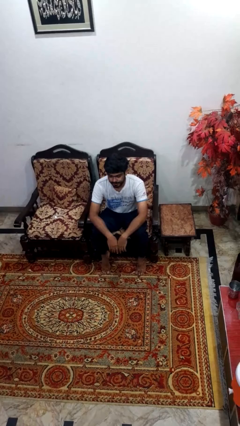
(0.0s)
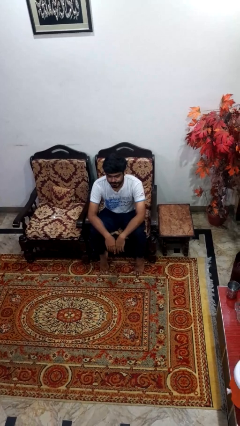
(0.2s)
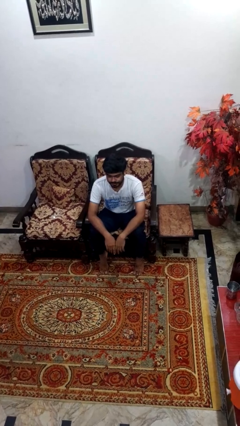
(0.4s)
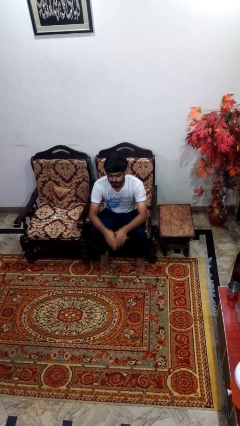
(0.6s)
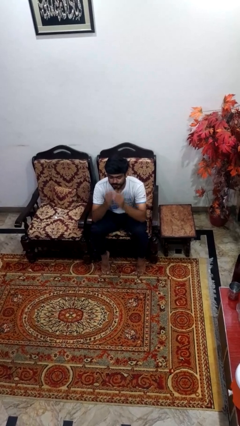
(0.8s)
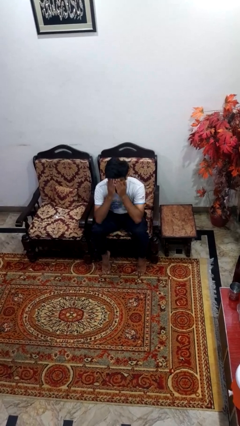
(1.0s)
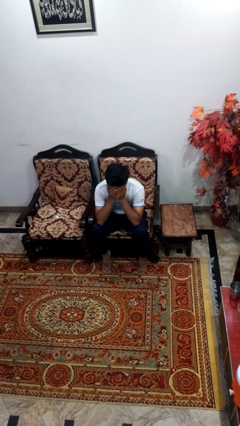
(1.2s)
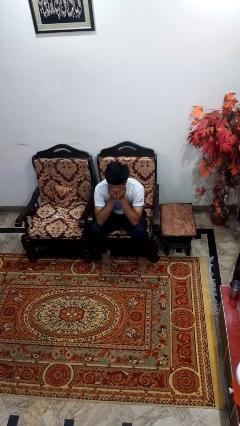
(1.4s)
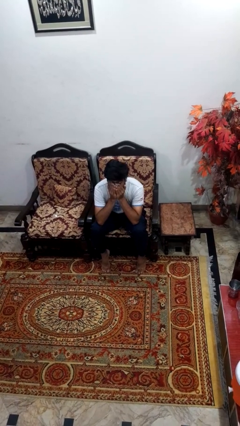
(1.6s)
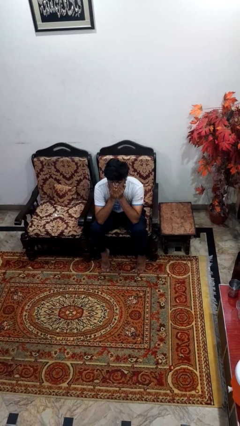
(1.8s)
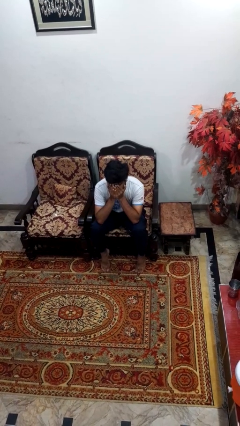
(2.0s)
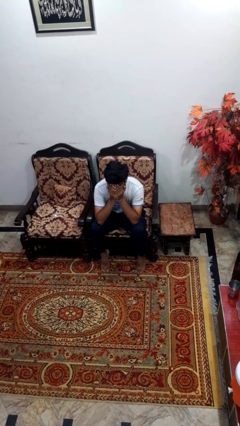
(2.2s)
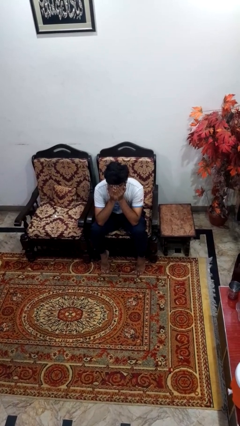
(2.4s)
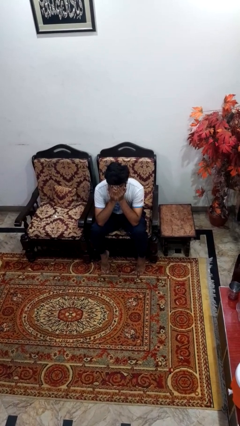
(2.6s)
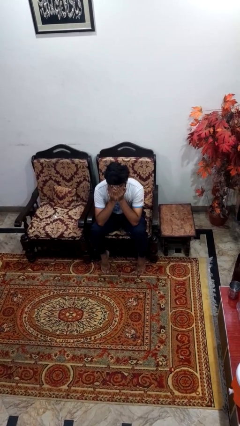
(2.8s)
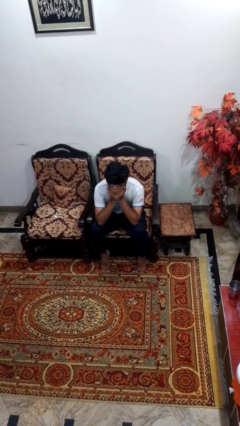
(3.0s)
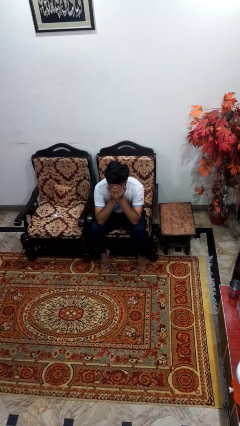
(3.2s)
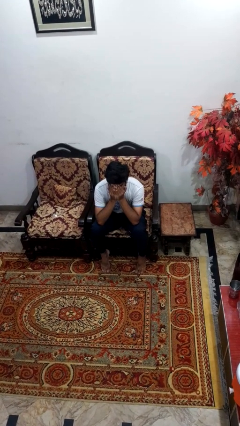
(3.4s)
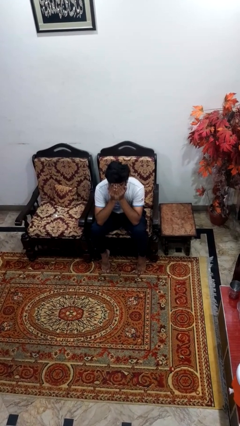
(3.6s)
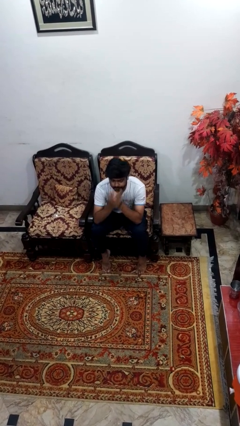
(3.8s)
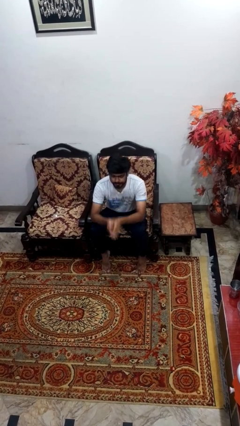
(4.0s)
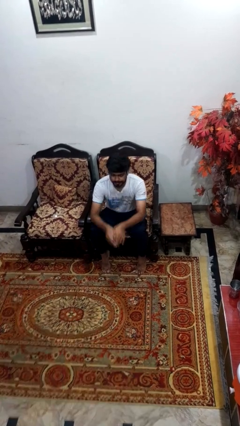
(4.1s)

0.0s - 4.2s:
person covers face with hands

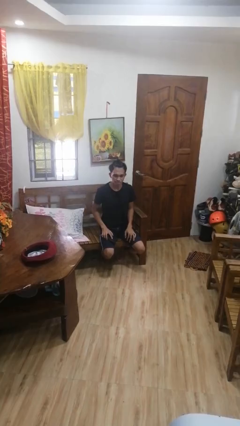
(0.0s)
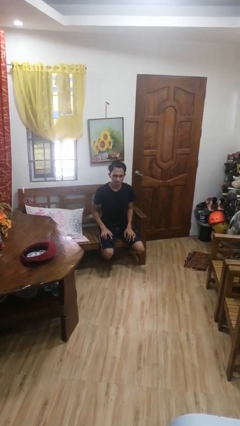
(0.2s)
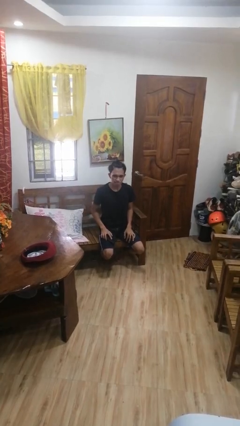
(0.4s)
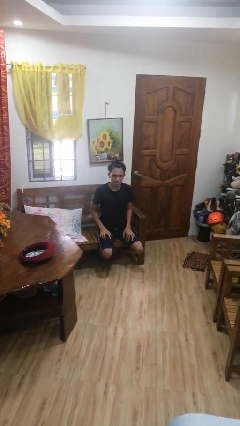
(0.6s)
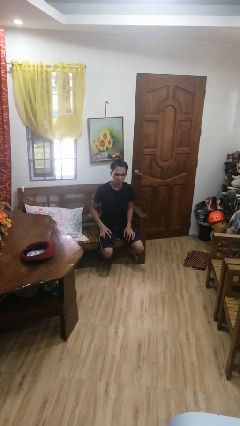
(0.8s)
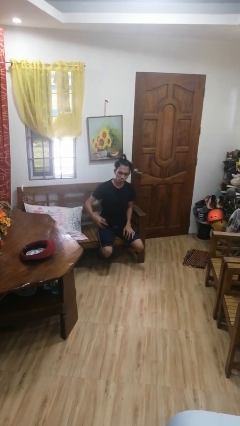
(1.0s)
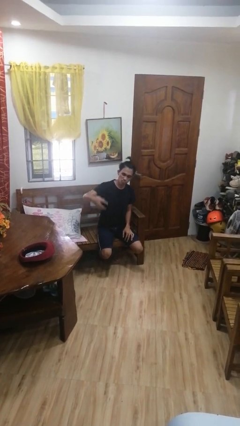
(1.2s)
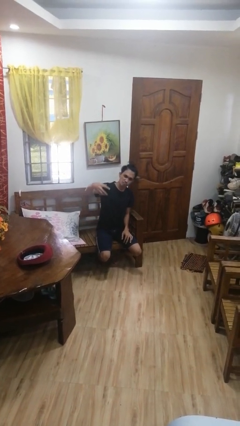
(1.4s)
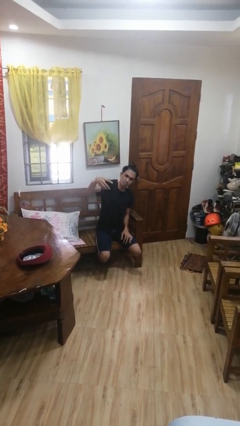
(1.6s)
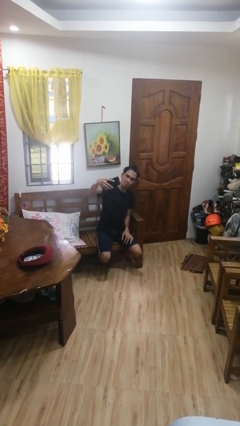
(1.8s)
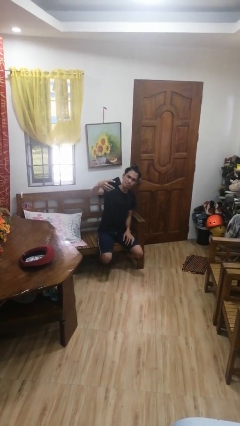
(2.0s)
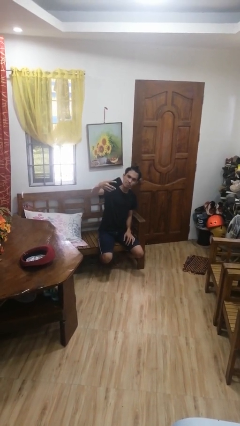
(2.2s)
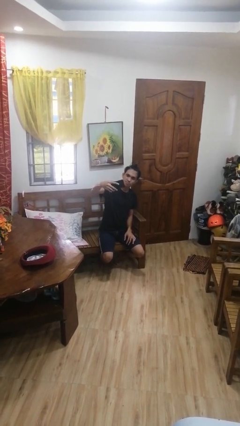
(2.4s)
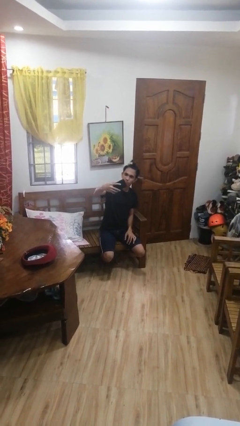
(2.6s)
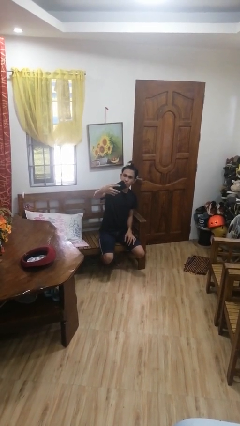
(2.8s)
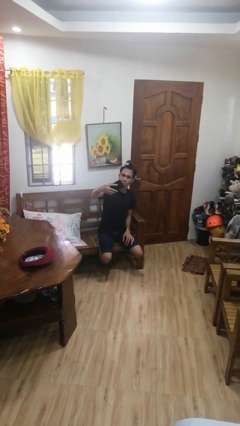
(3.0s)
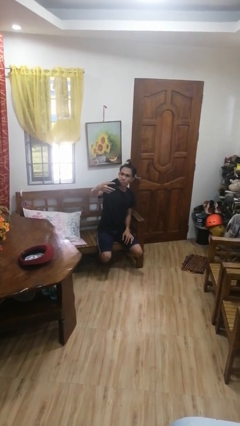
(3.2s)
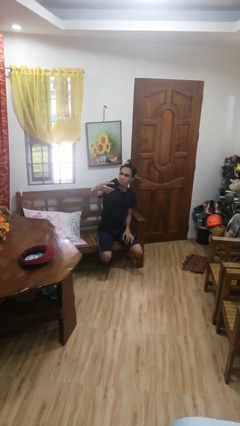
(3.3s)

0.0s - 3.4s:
person takes selfie

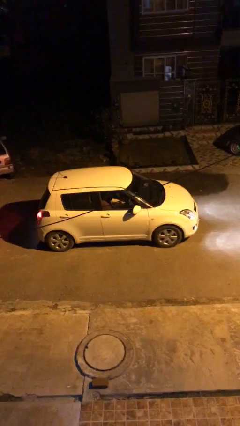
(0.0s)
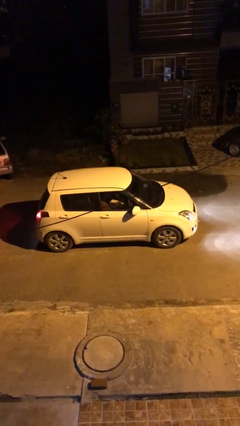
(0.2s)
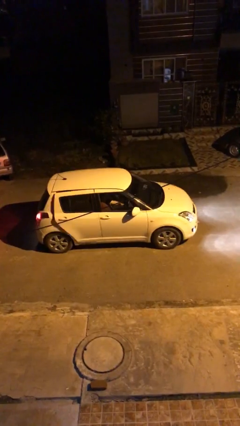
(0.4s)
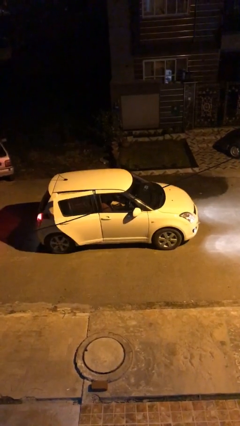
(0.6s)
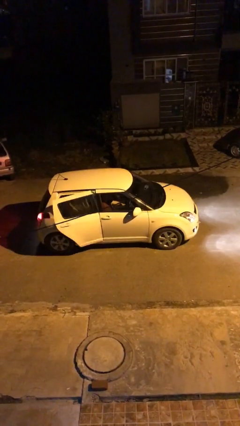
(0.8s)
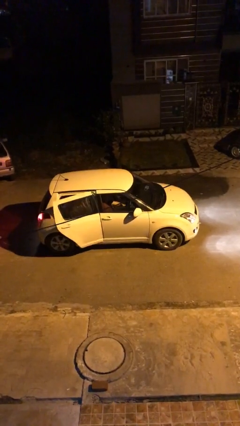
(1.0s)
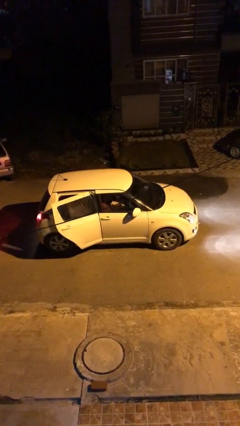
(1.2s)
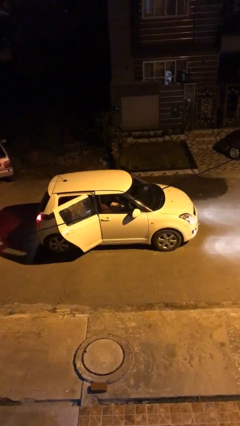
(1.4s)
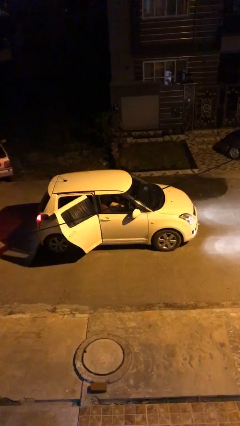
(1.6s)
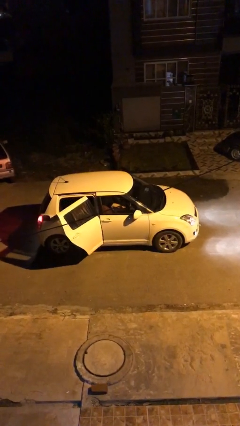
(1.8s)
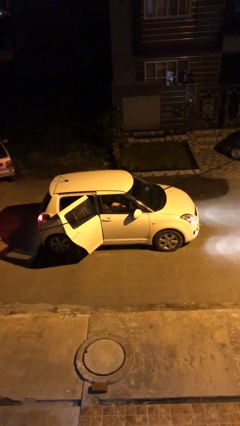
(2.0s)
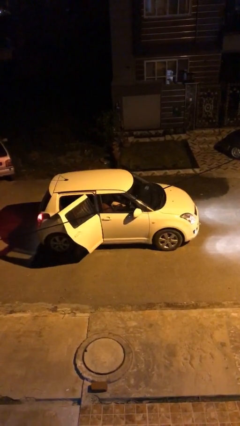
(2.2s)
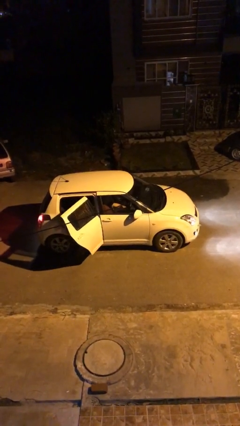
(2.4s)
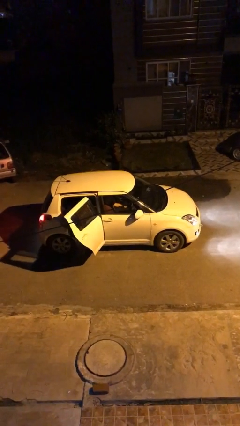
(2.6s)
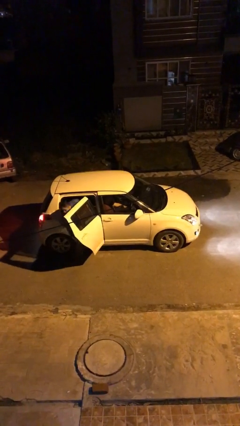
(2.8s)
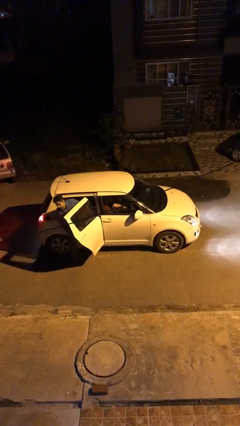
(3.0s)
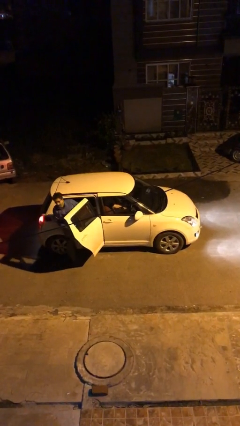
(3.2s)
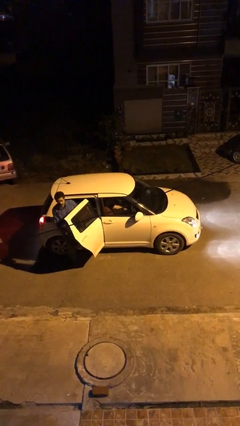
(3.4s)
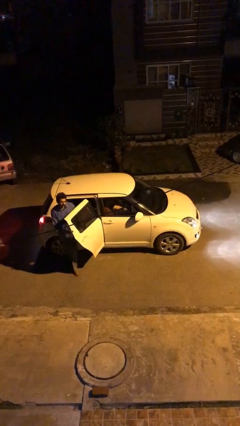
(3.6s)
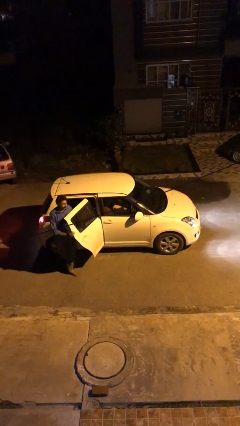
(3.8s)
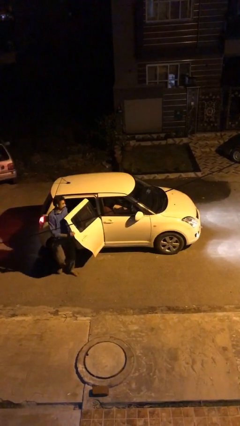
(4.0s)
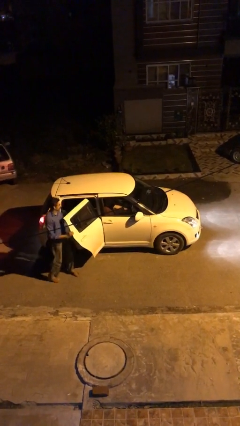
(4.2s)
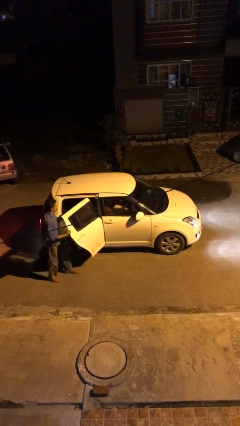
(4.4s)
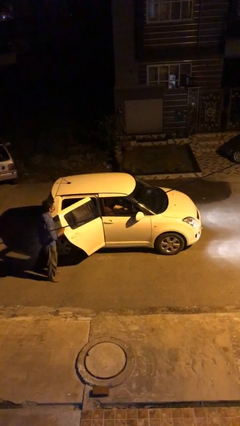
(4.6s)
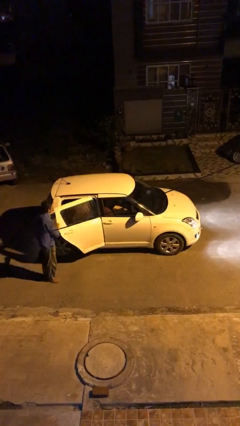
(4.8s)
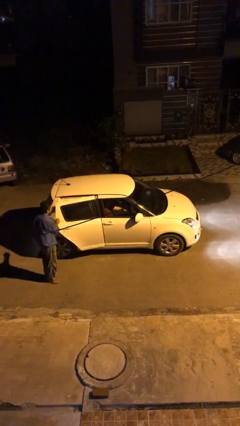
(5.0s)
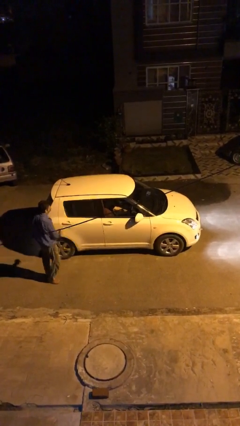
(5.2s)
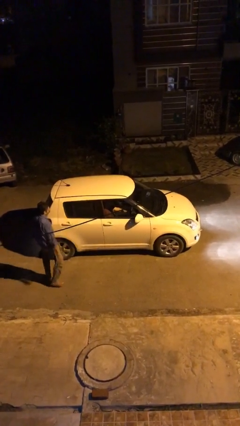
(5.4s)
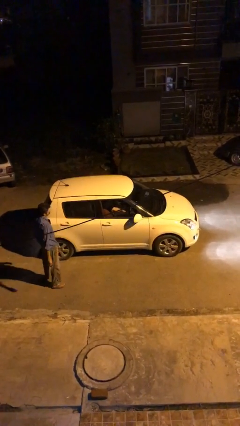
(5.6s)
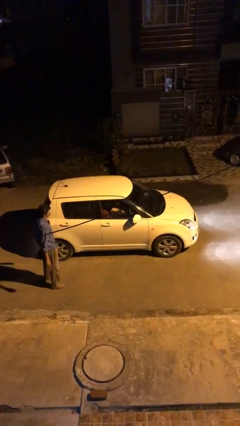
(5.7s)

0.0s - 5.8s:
car drops off person

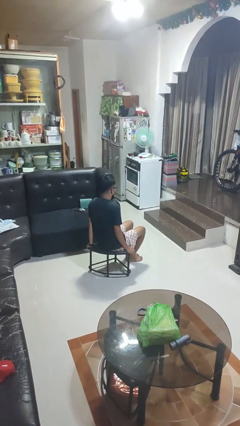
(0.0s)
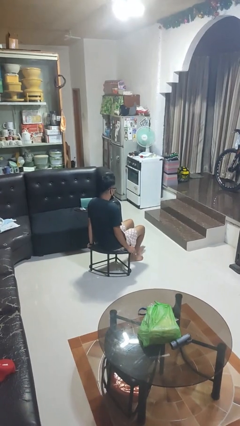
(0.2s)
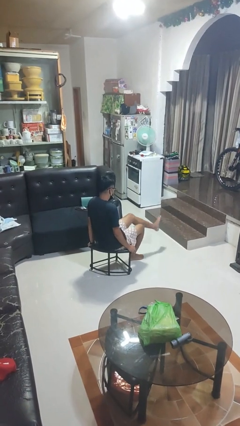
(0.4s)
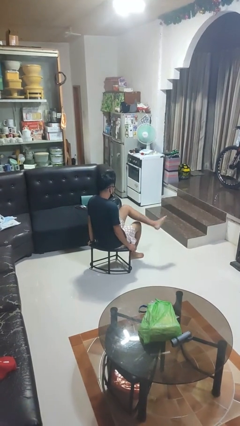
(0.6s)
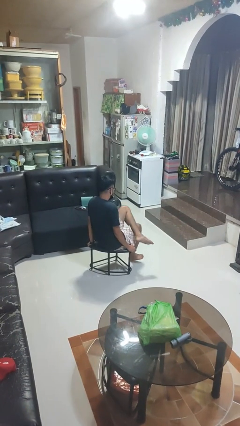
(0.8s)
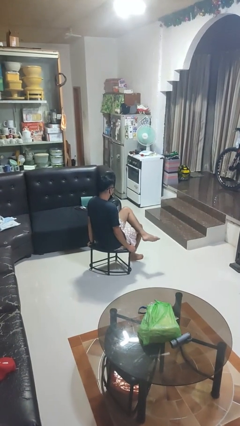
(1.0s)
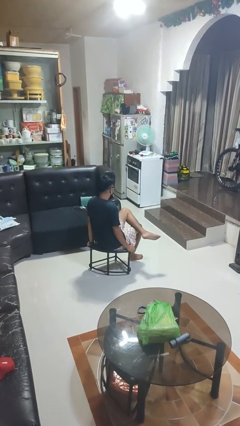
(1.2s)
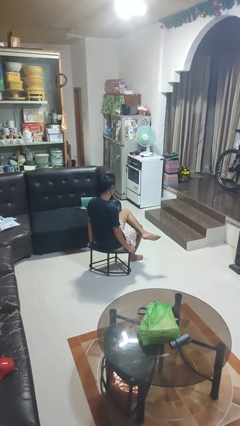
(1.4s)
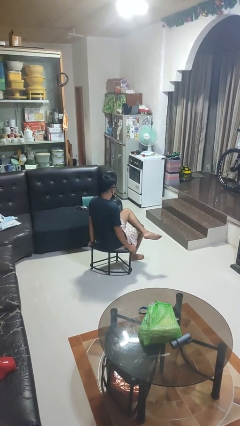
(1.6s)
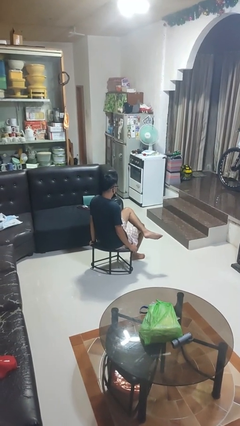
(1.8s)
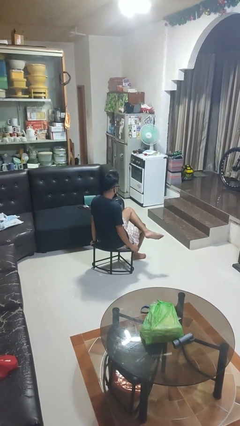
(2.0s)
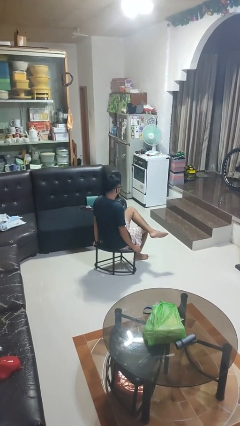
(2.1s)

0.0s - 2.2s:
person crosses legs

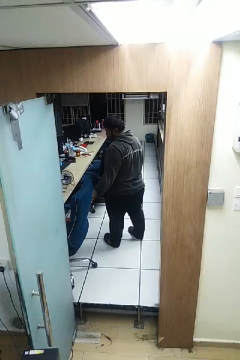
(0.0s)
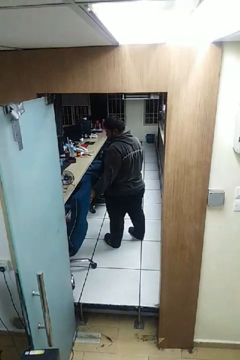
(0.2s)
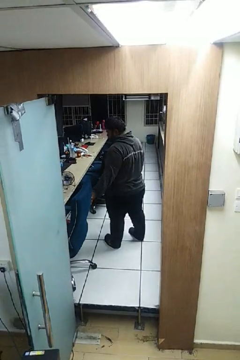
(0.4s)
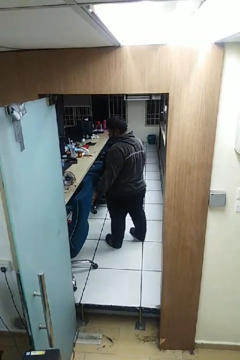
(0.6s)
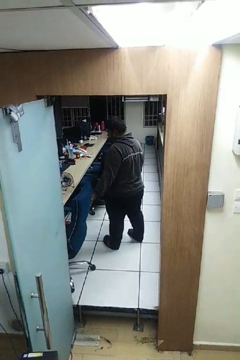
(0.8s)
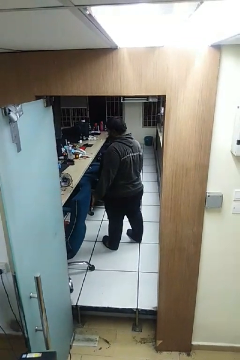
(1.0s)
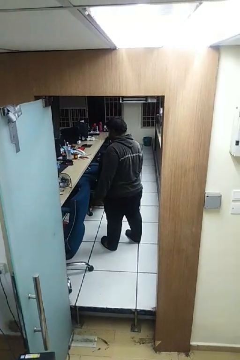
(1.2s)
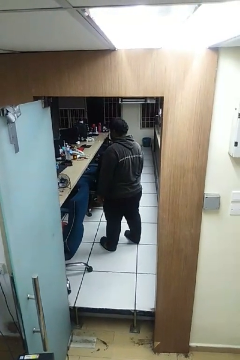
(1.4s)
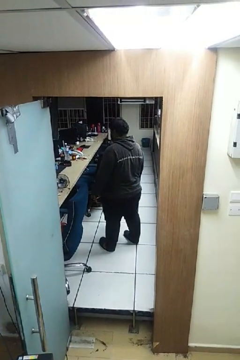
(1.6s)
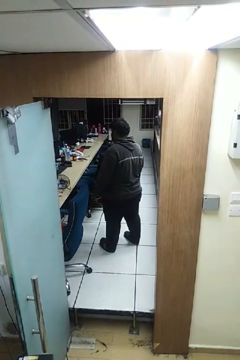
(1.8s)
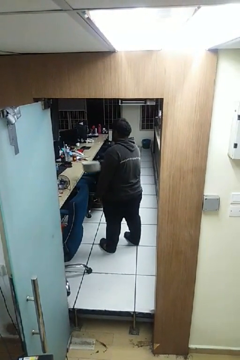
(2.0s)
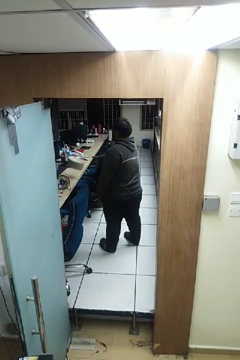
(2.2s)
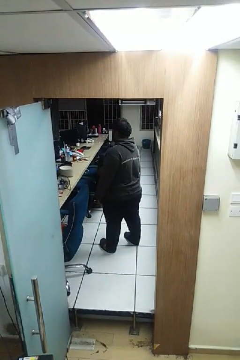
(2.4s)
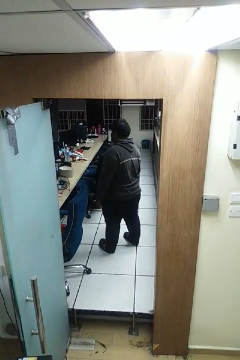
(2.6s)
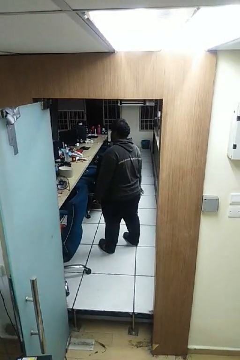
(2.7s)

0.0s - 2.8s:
person throws object on table
